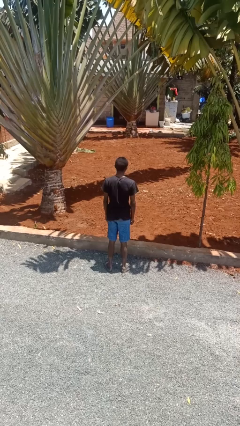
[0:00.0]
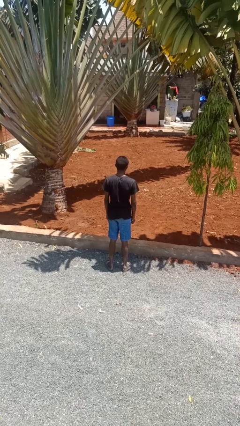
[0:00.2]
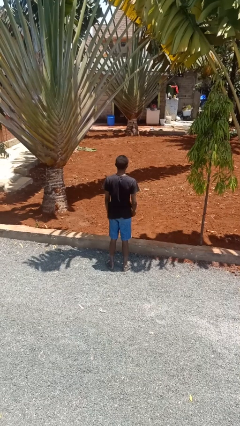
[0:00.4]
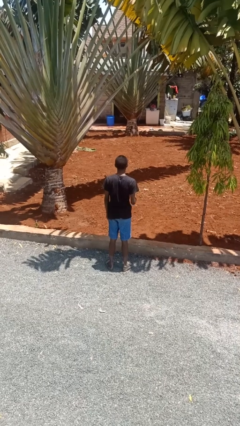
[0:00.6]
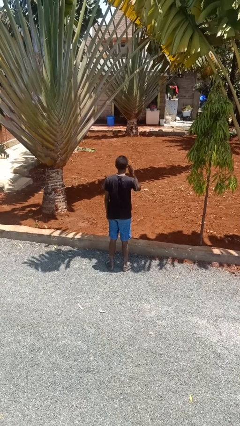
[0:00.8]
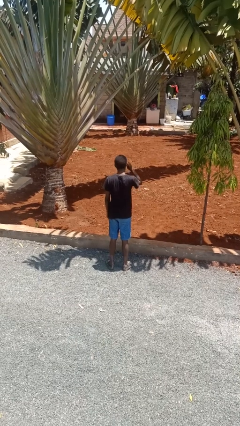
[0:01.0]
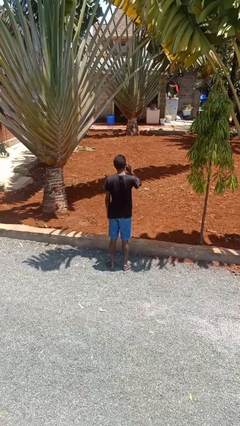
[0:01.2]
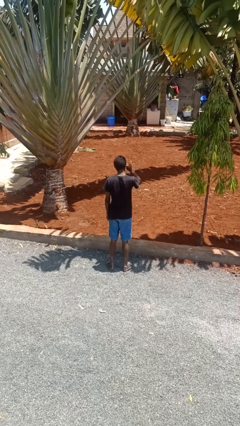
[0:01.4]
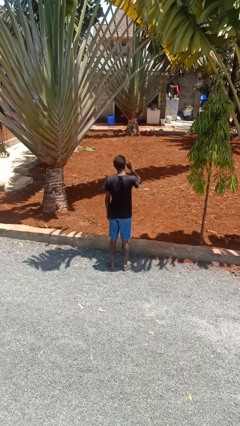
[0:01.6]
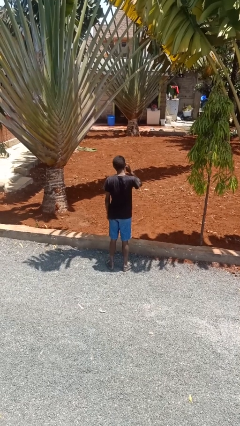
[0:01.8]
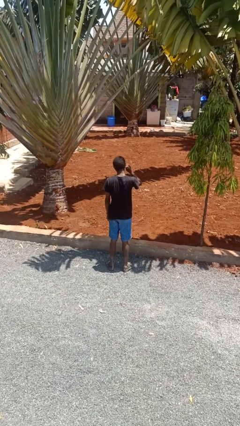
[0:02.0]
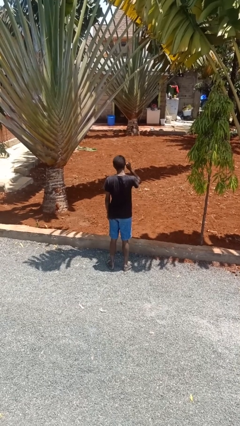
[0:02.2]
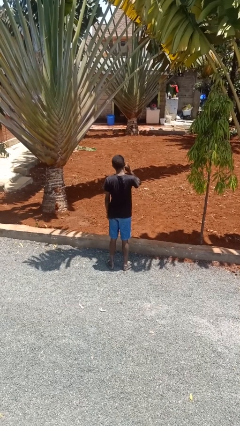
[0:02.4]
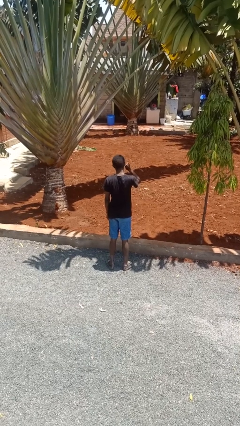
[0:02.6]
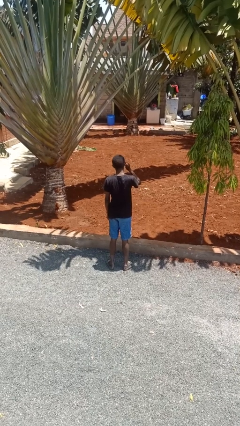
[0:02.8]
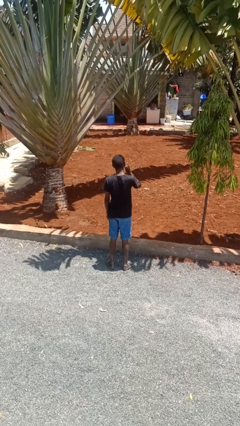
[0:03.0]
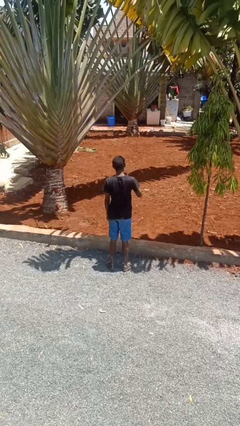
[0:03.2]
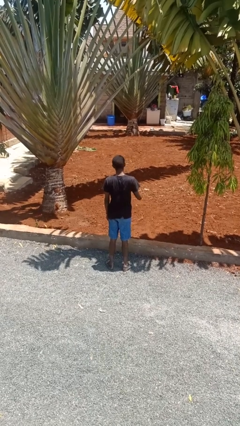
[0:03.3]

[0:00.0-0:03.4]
person touches earlobe

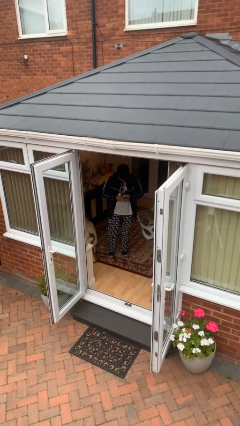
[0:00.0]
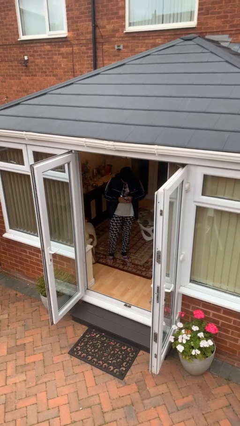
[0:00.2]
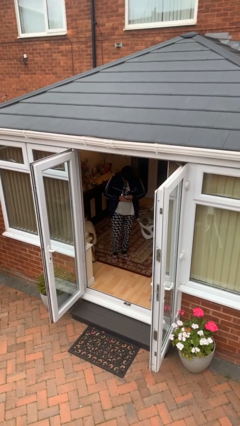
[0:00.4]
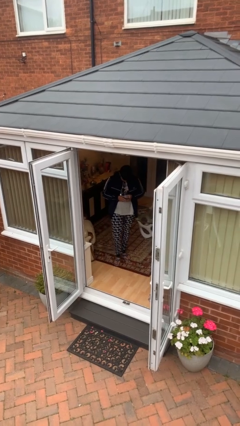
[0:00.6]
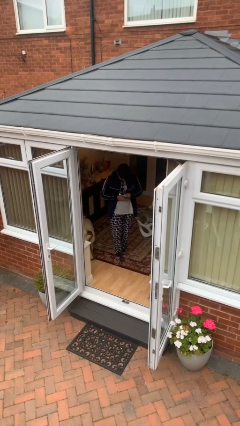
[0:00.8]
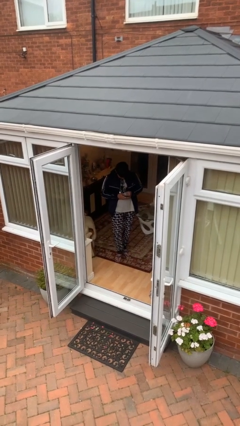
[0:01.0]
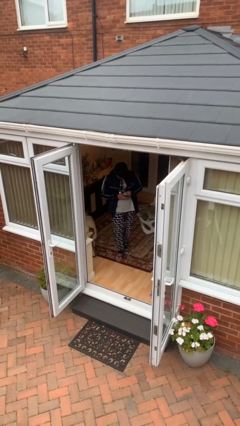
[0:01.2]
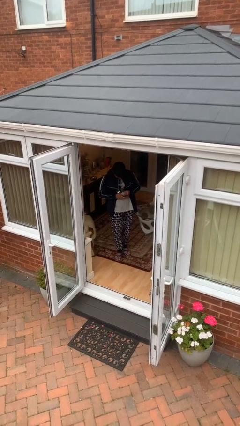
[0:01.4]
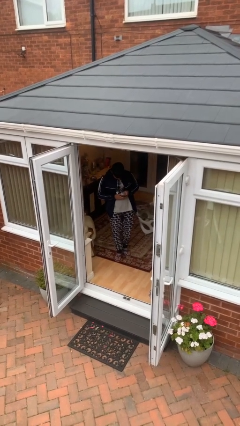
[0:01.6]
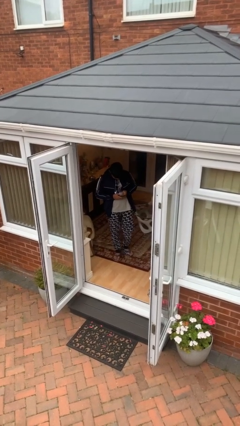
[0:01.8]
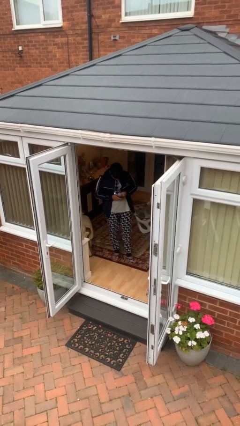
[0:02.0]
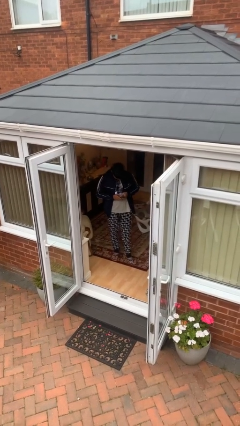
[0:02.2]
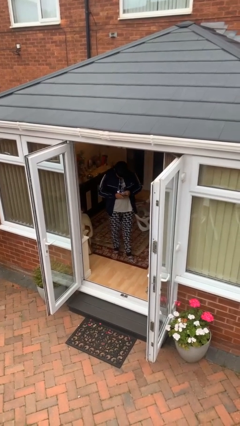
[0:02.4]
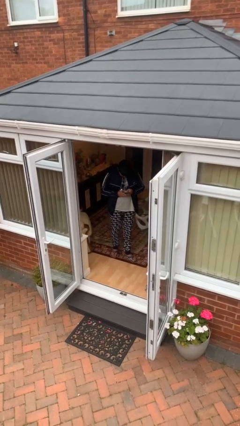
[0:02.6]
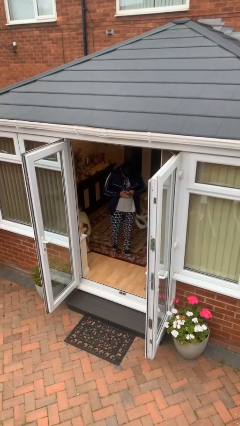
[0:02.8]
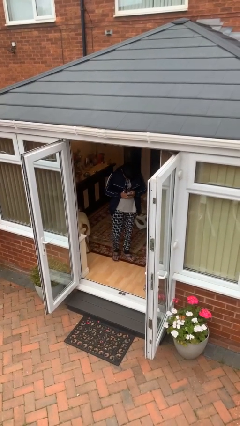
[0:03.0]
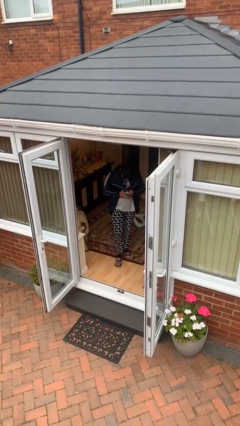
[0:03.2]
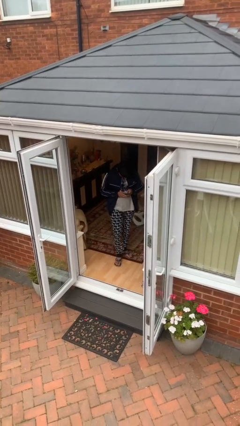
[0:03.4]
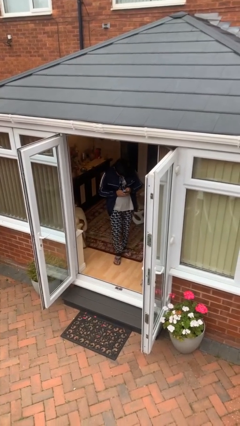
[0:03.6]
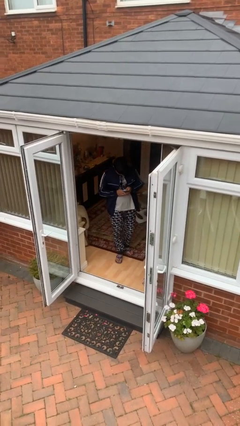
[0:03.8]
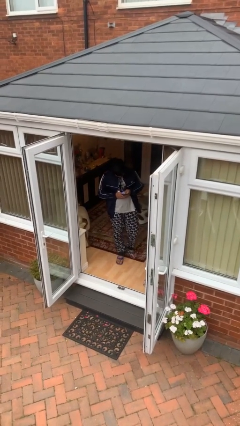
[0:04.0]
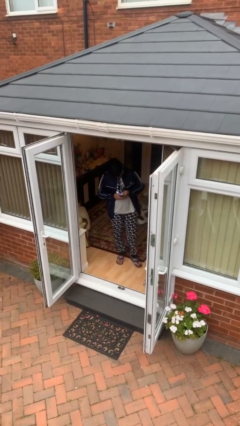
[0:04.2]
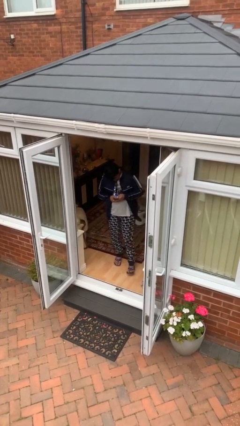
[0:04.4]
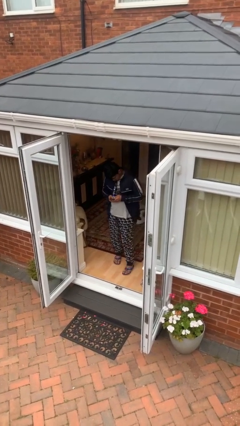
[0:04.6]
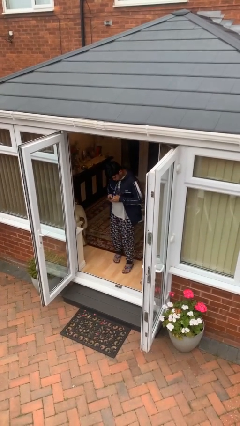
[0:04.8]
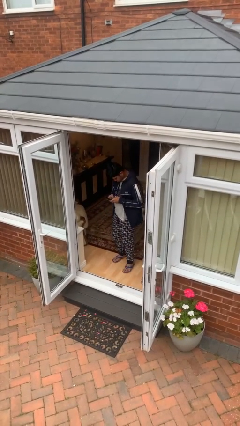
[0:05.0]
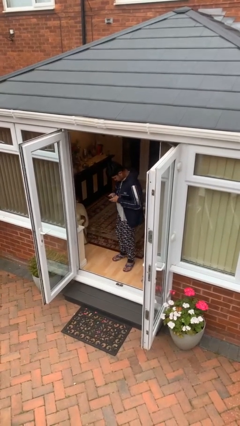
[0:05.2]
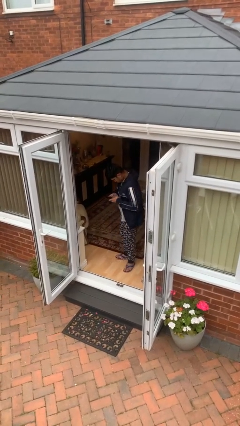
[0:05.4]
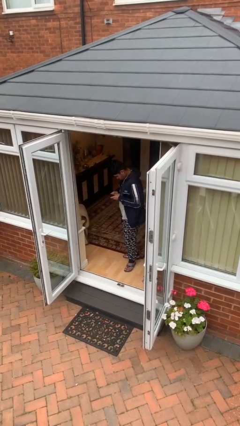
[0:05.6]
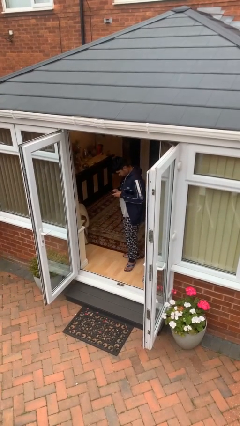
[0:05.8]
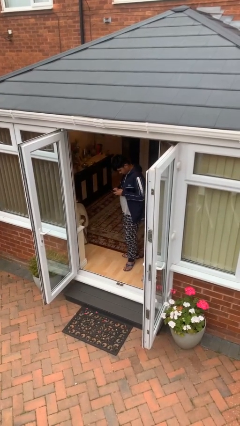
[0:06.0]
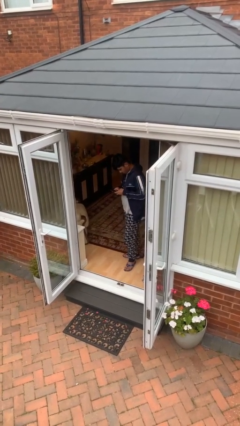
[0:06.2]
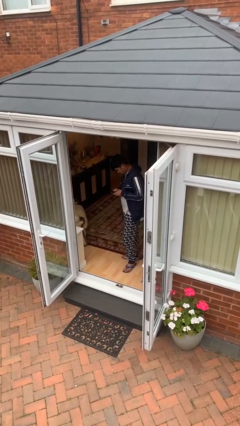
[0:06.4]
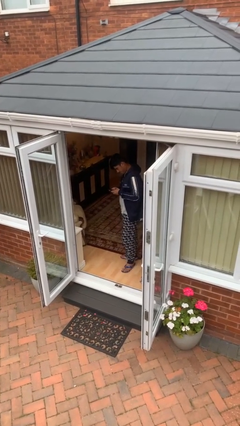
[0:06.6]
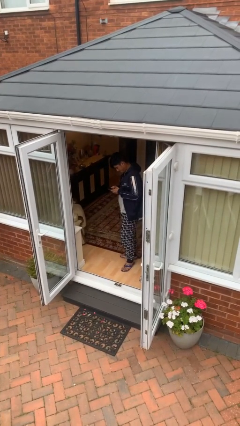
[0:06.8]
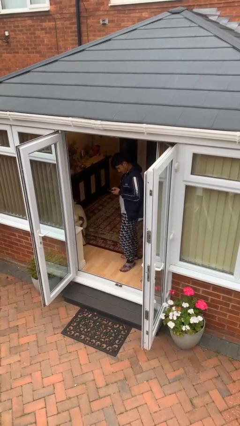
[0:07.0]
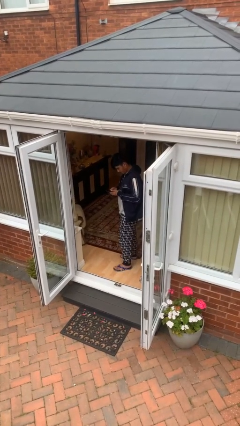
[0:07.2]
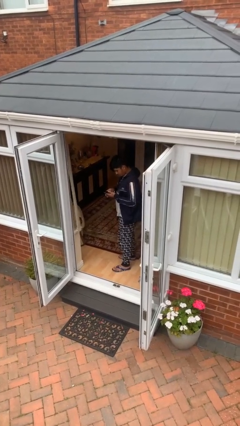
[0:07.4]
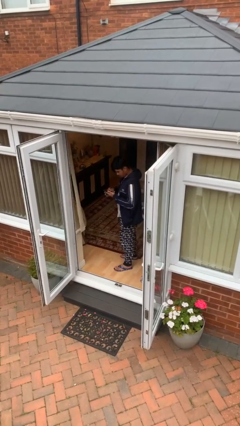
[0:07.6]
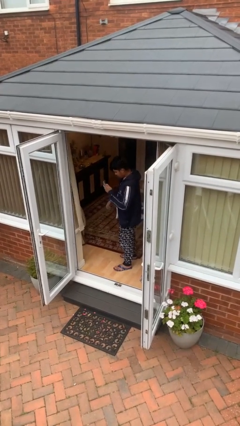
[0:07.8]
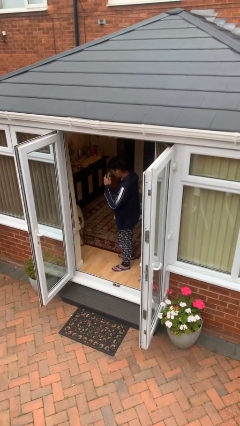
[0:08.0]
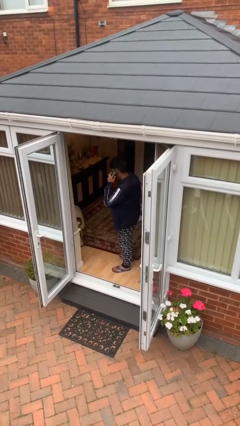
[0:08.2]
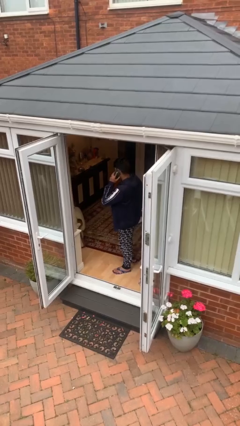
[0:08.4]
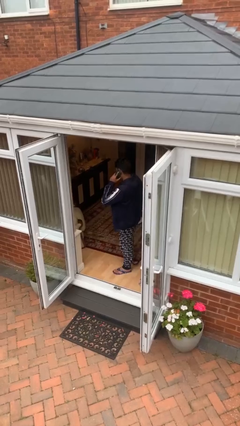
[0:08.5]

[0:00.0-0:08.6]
person texts on phone

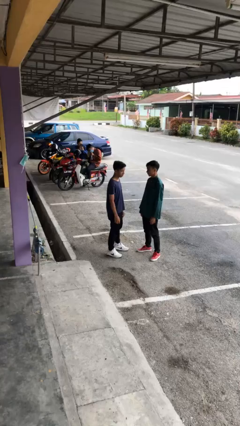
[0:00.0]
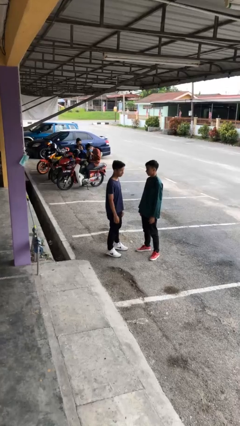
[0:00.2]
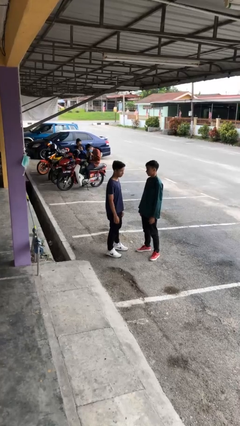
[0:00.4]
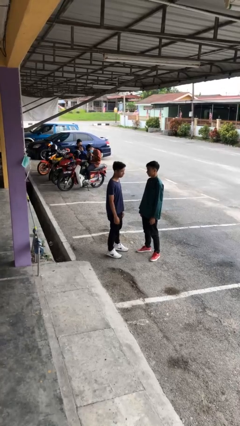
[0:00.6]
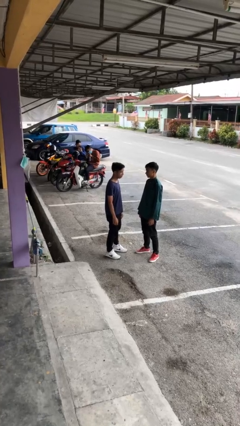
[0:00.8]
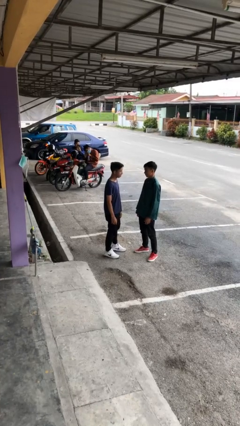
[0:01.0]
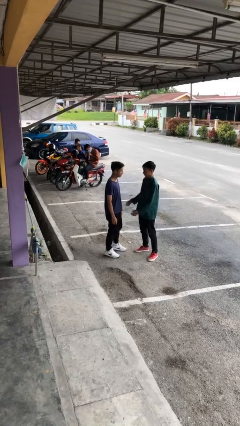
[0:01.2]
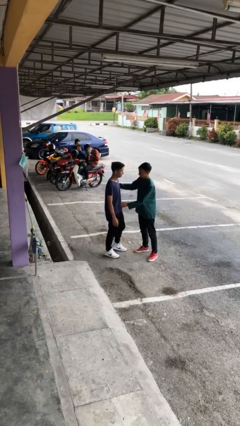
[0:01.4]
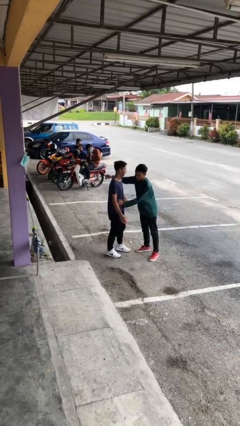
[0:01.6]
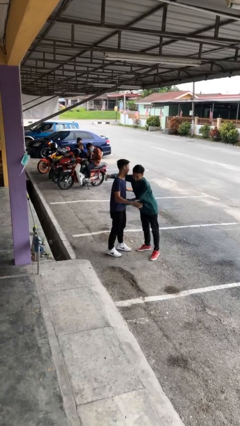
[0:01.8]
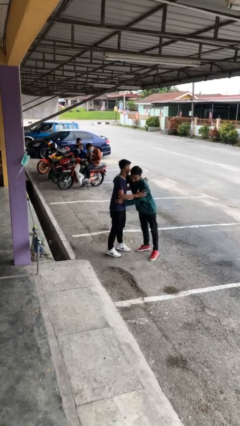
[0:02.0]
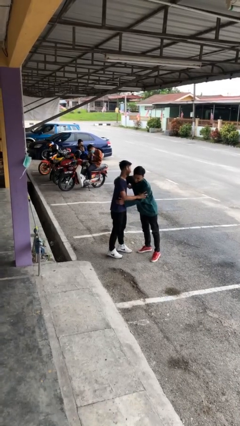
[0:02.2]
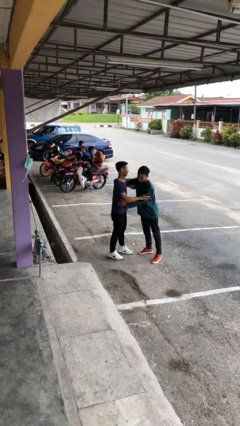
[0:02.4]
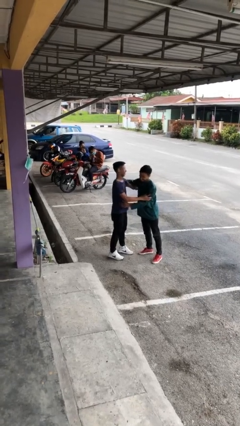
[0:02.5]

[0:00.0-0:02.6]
person embraces person

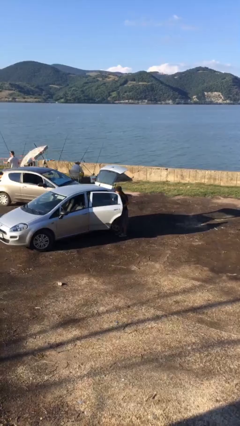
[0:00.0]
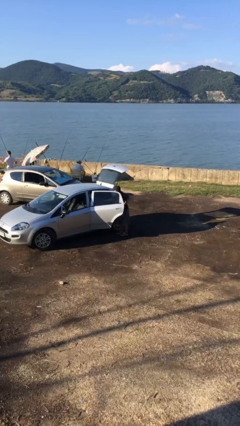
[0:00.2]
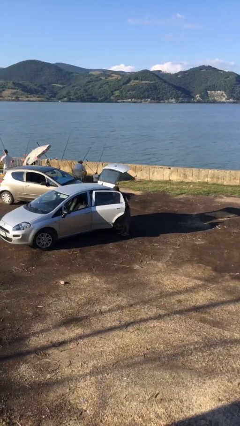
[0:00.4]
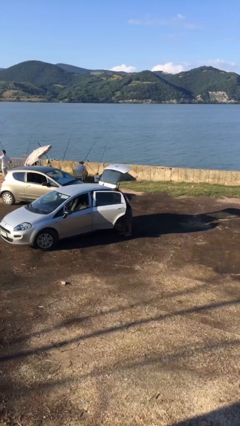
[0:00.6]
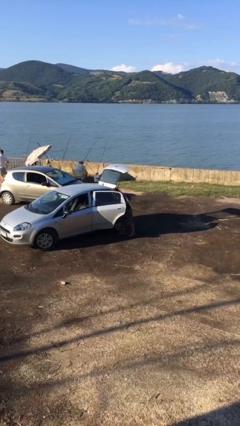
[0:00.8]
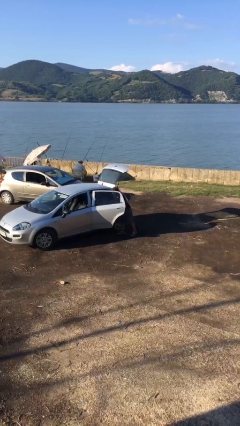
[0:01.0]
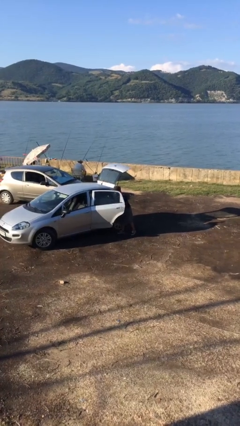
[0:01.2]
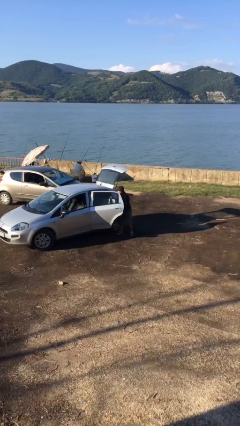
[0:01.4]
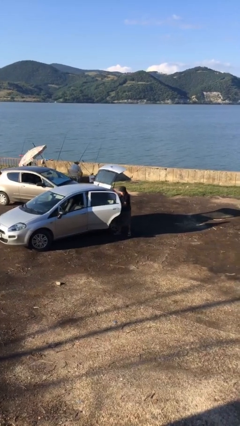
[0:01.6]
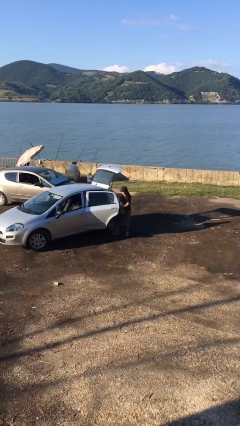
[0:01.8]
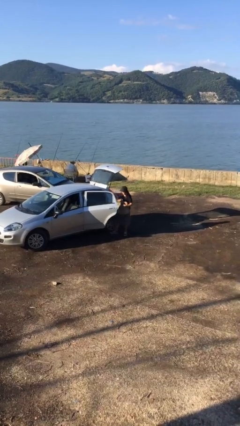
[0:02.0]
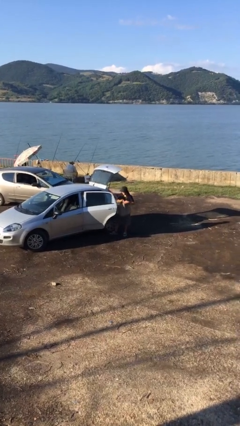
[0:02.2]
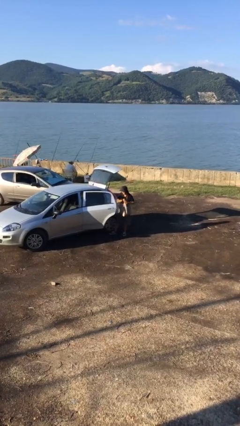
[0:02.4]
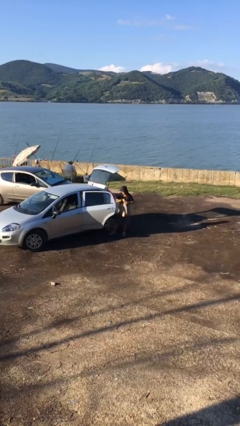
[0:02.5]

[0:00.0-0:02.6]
person unloads car
